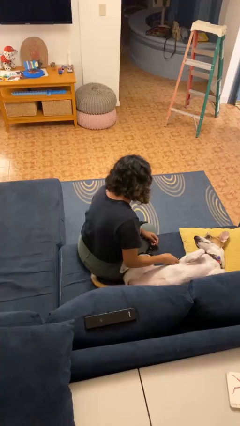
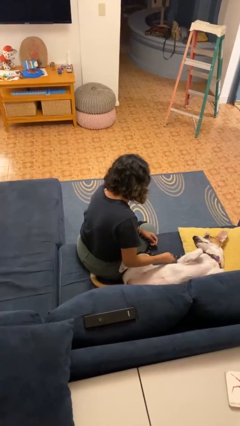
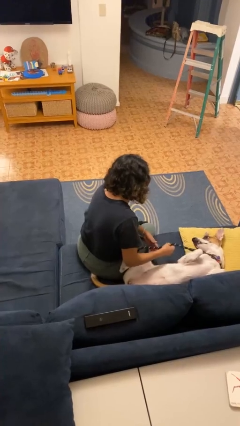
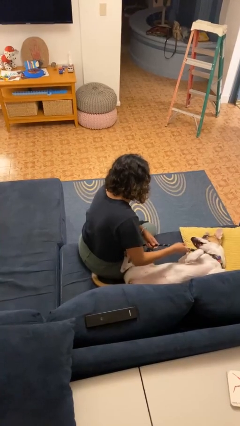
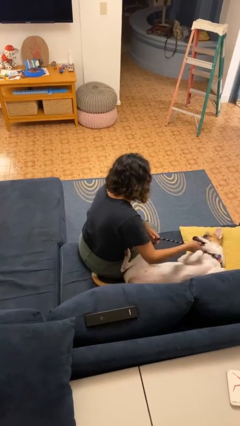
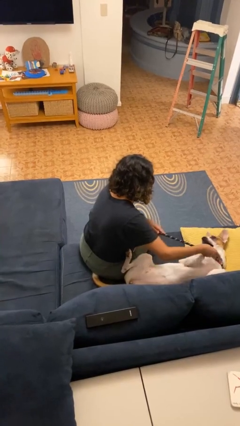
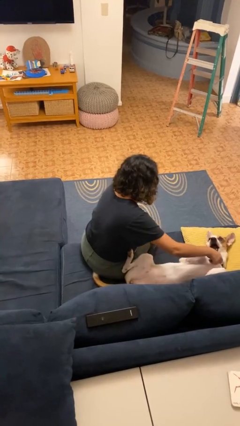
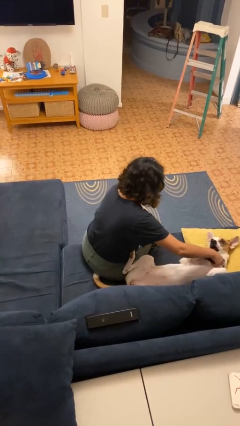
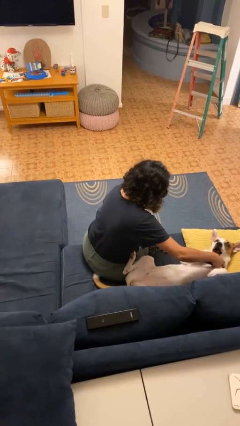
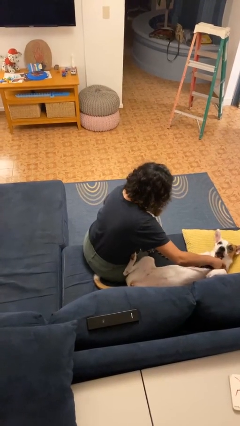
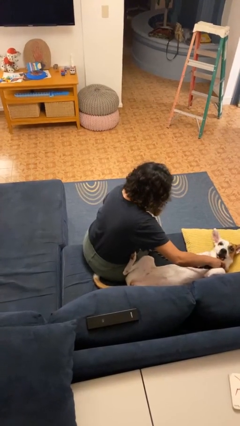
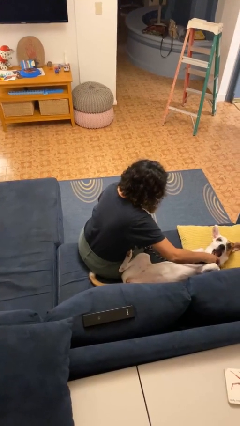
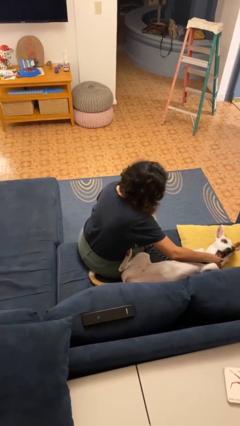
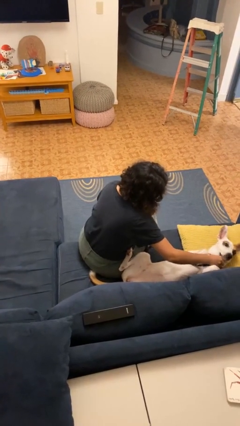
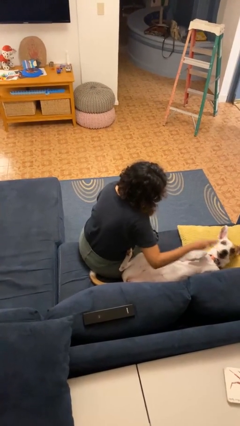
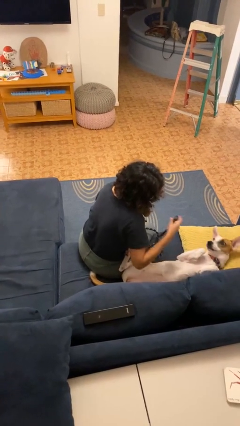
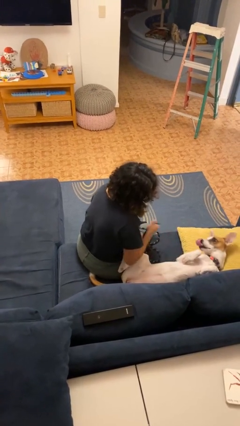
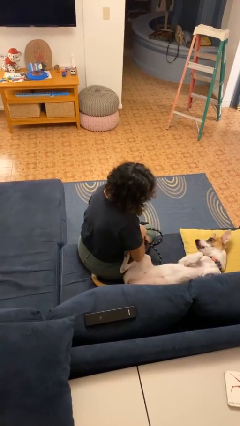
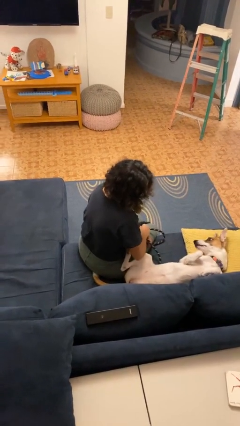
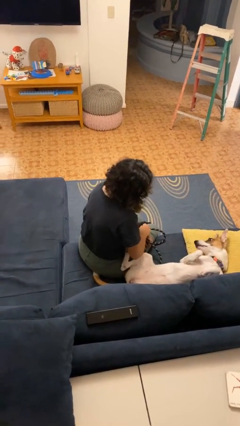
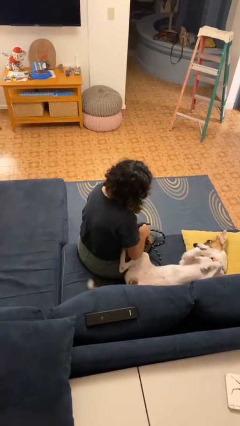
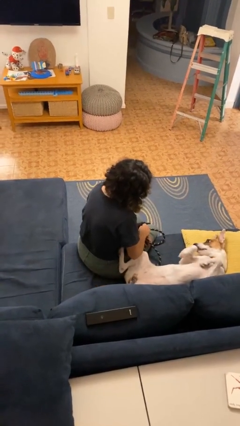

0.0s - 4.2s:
person unattaches leash from dog

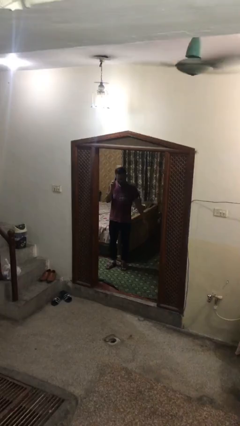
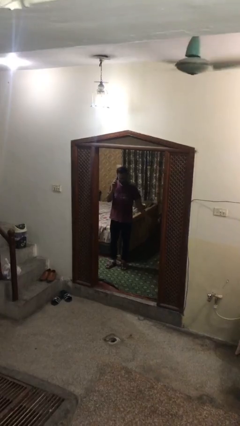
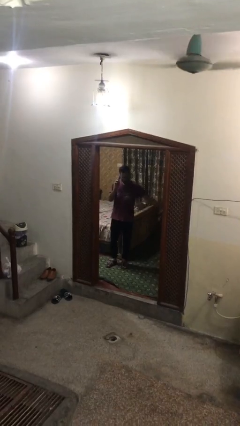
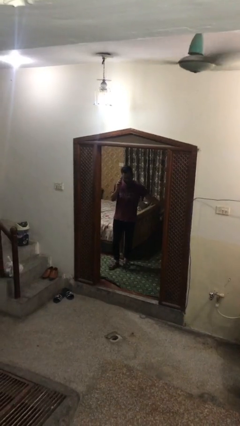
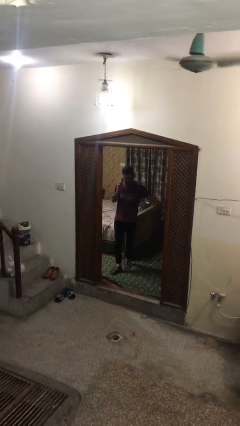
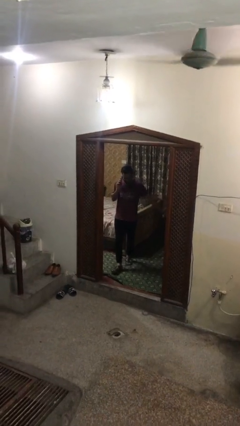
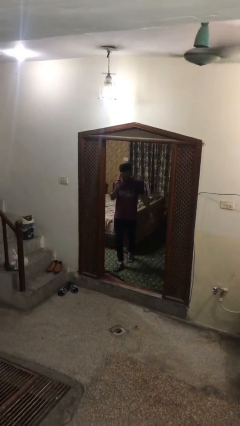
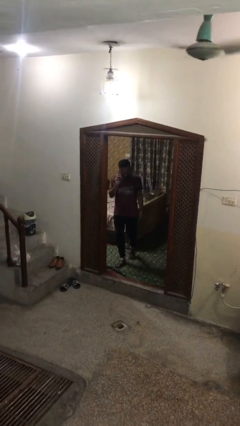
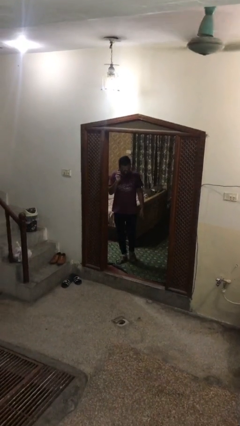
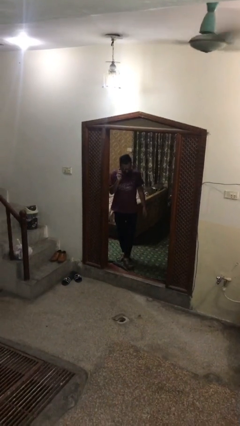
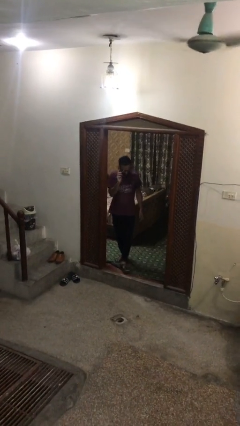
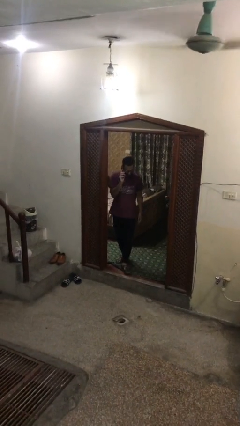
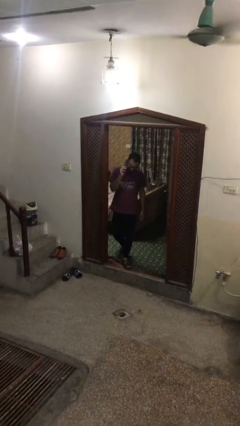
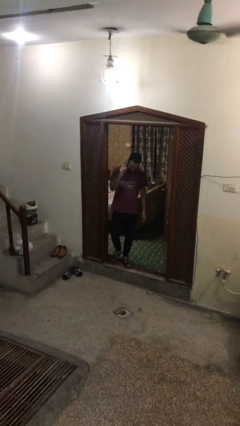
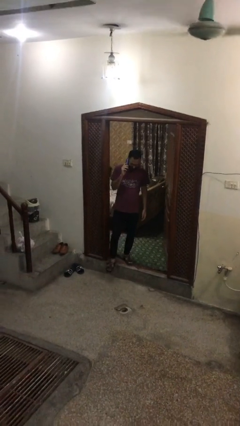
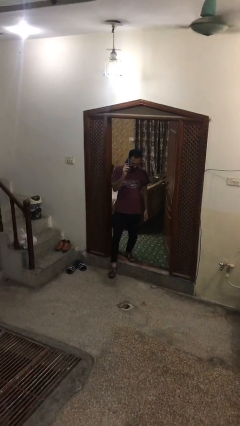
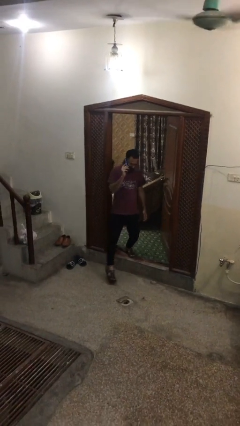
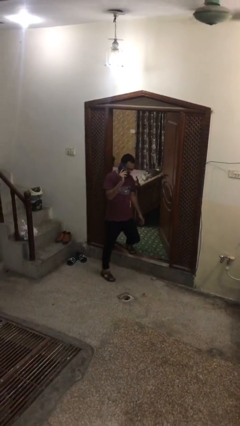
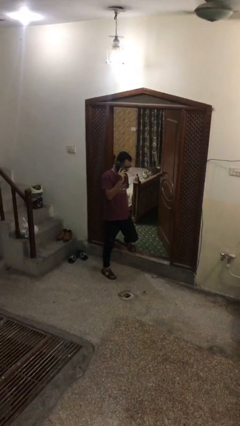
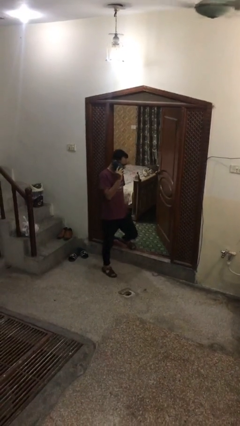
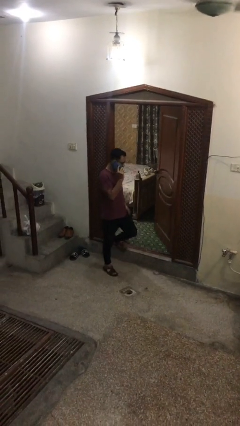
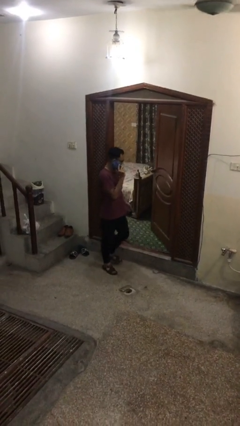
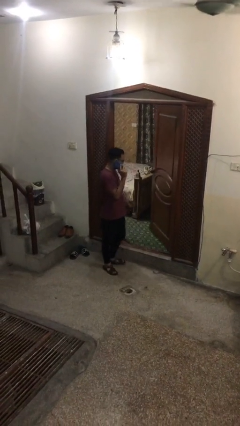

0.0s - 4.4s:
person enters scene through structure

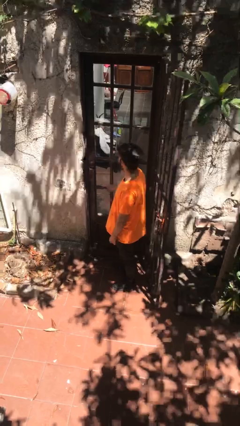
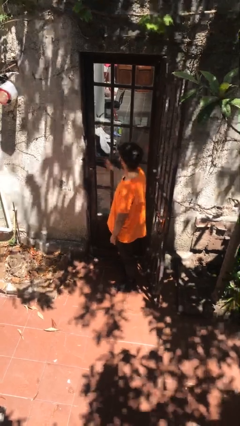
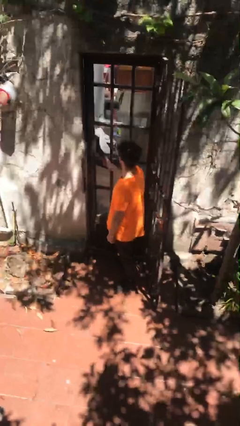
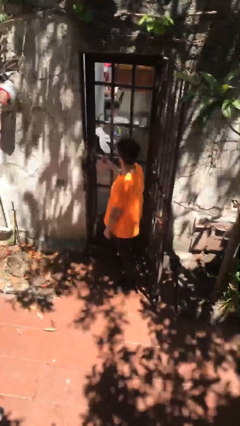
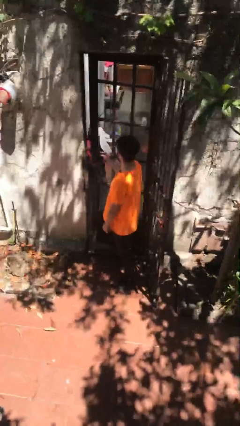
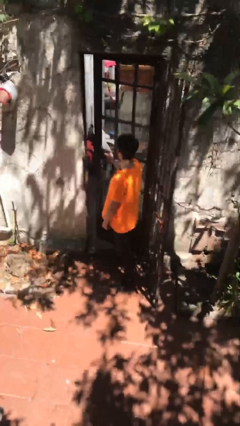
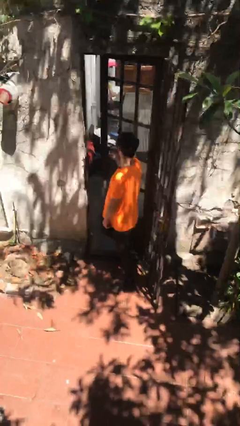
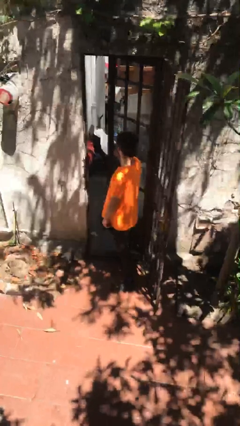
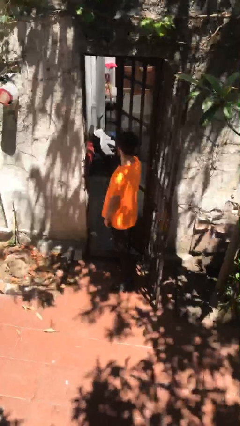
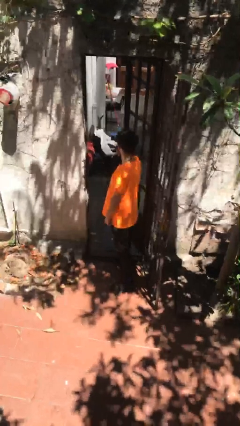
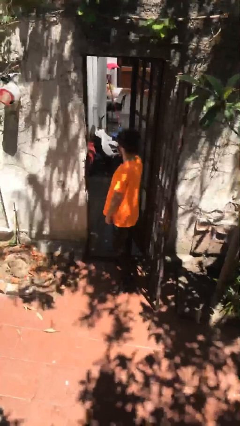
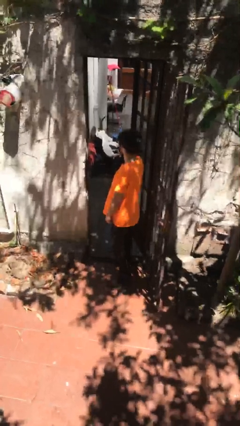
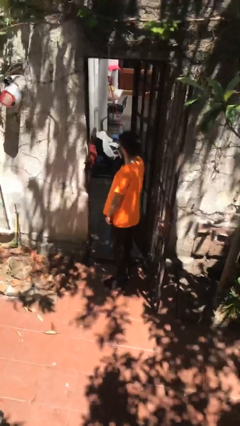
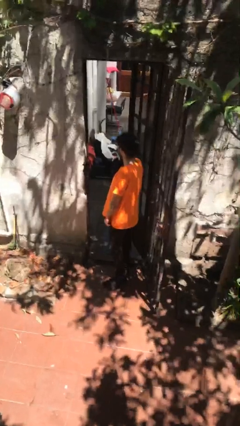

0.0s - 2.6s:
person opens facility door

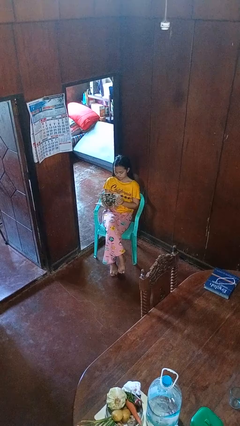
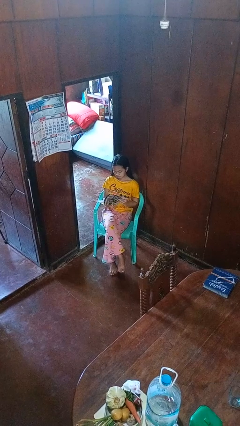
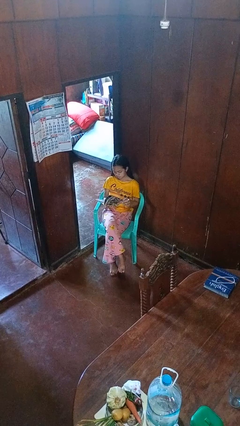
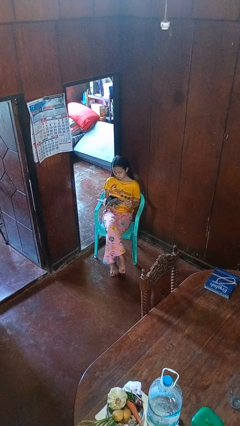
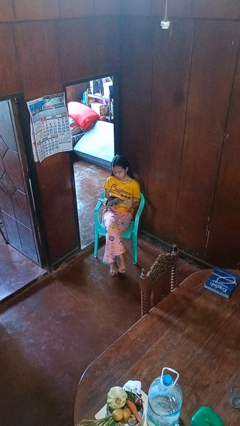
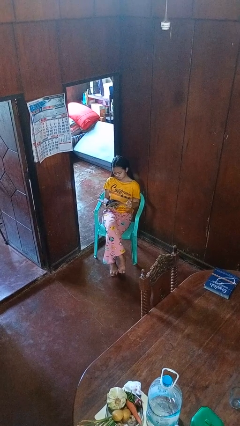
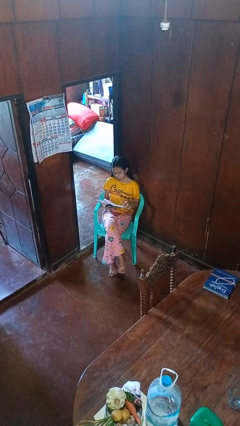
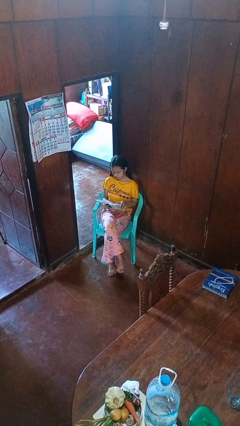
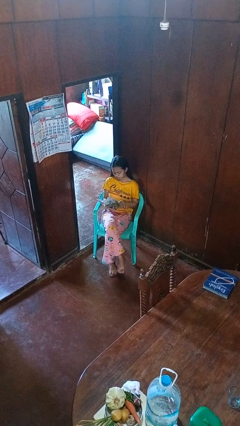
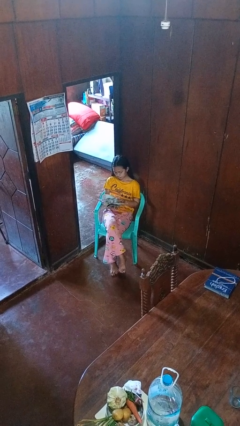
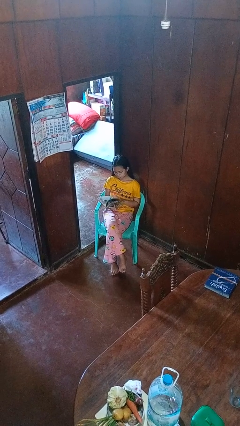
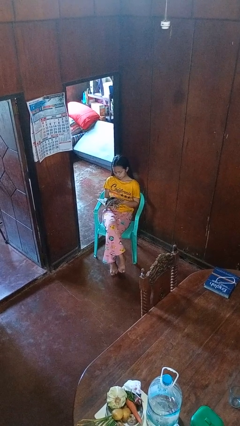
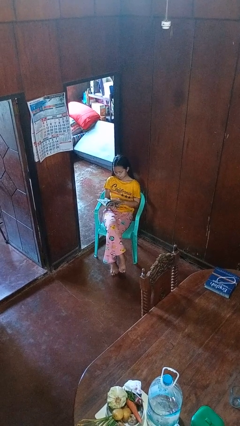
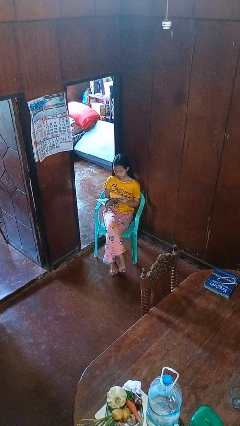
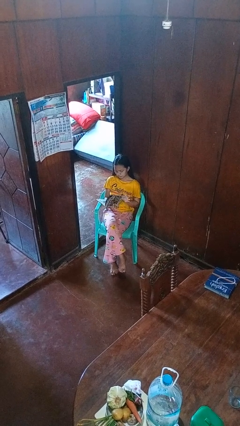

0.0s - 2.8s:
person reads magazine

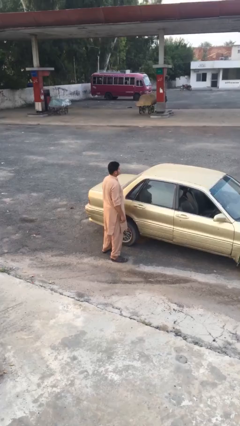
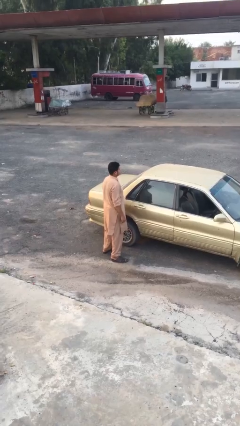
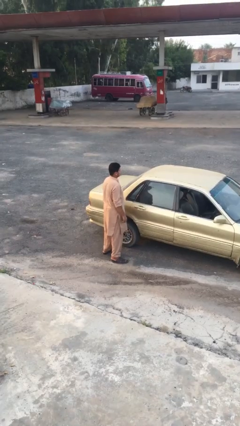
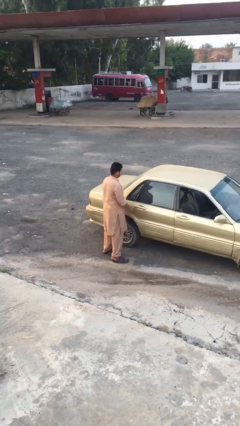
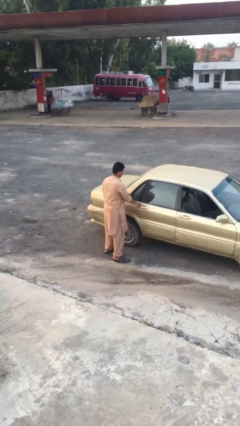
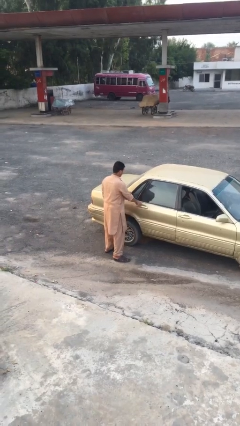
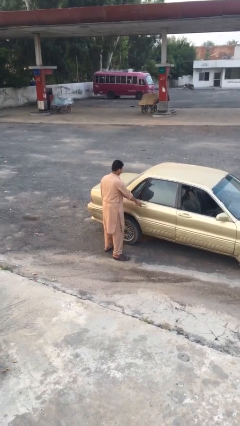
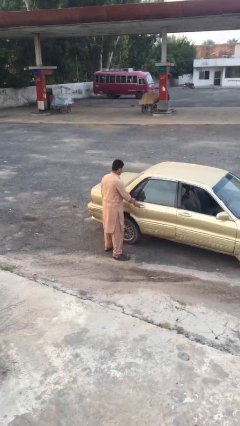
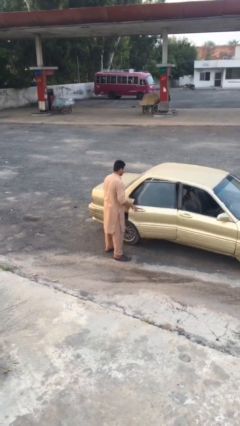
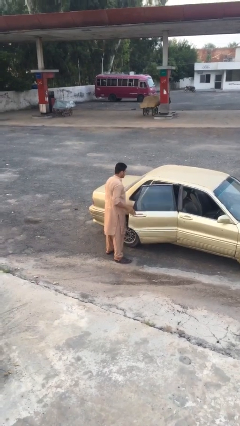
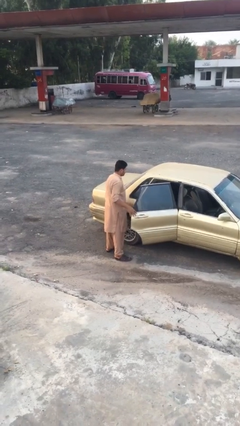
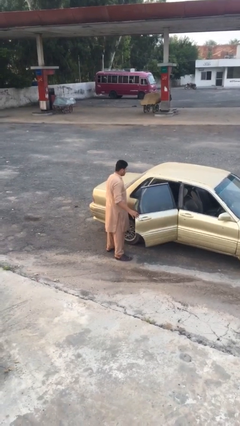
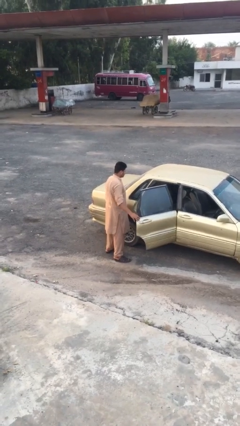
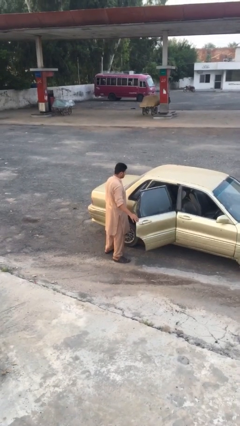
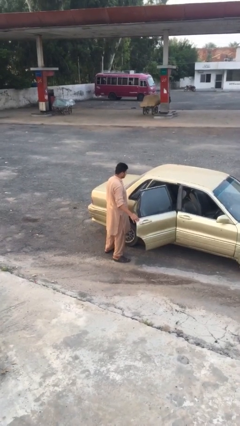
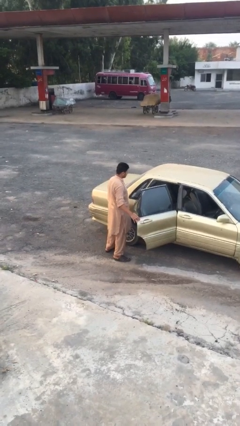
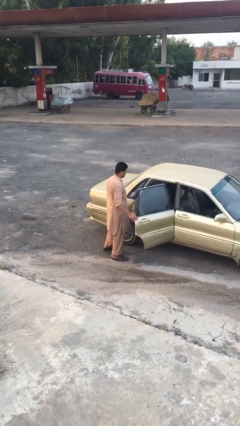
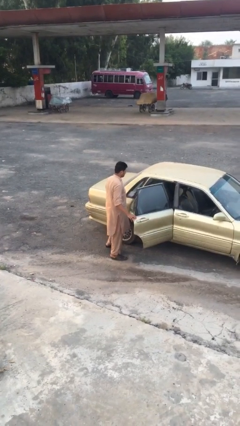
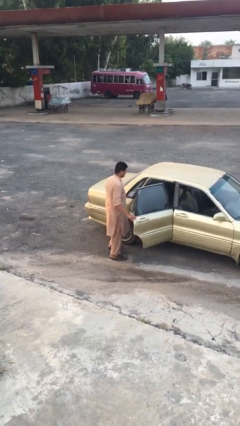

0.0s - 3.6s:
person opens car door
